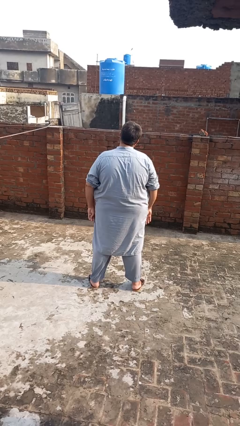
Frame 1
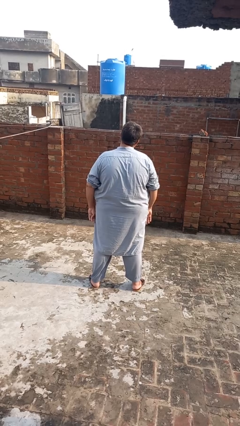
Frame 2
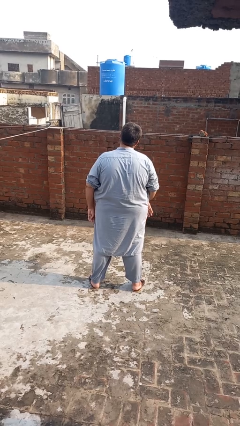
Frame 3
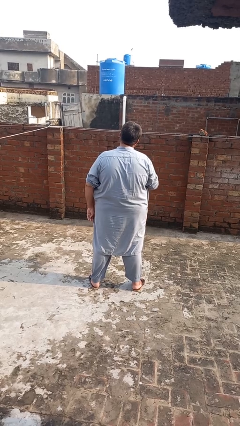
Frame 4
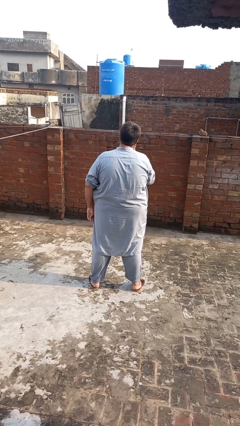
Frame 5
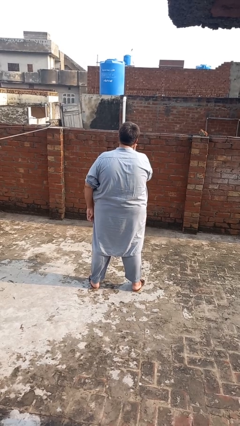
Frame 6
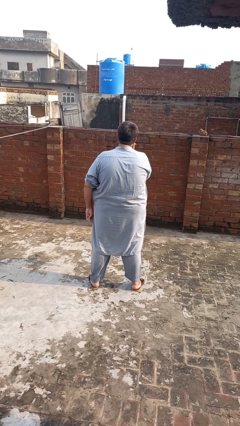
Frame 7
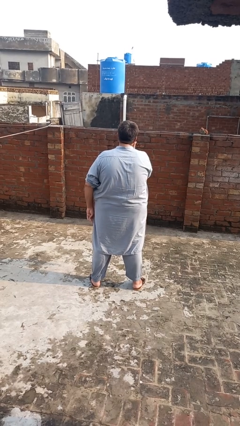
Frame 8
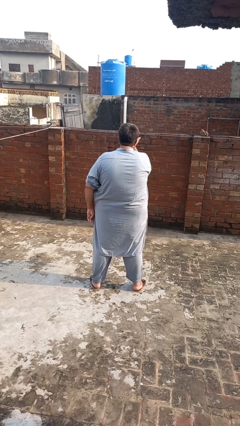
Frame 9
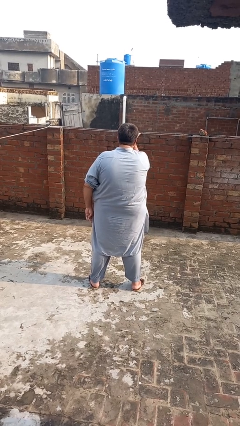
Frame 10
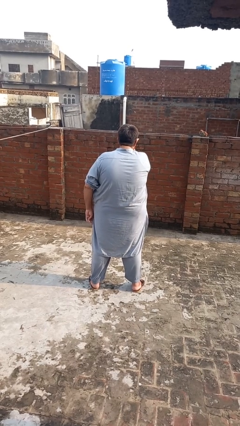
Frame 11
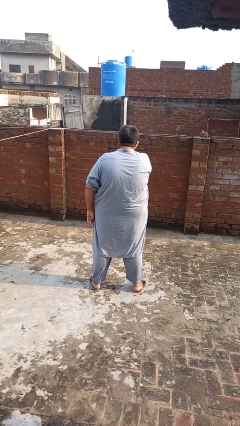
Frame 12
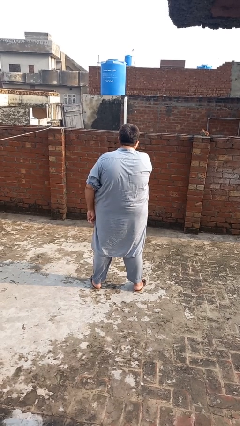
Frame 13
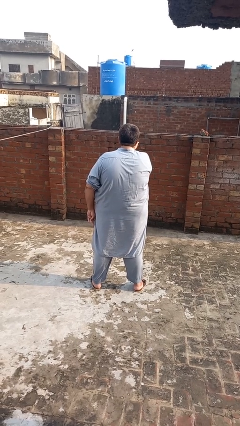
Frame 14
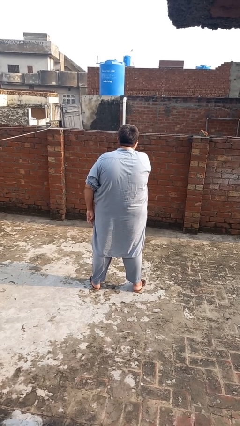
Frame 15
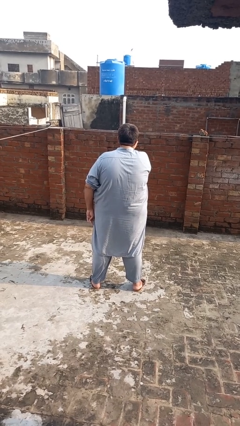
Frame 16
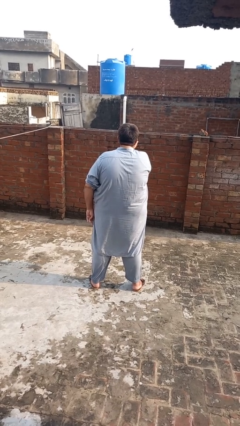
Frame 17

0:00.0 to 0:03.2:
person gestures blow kiss

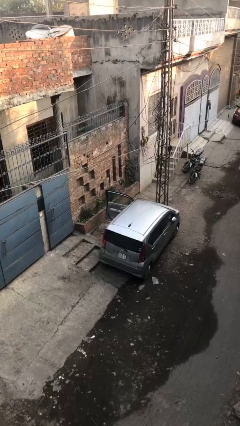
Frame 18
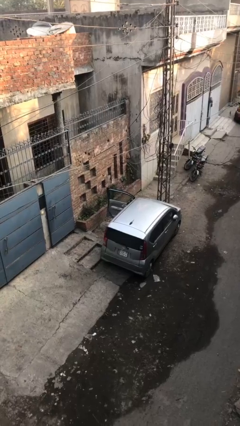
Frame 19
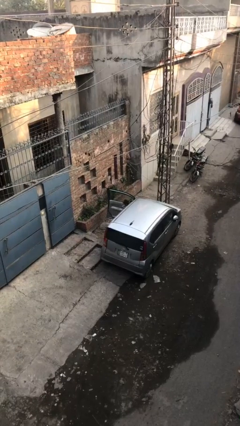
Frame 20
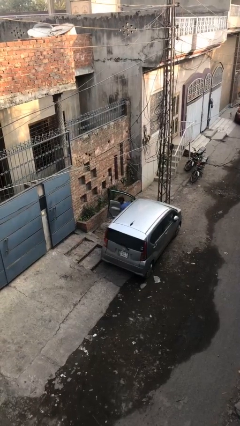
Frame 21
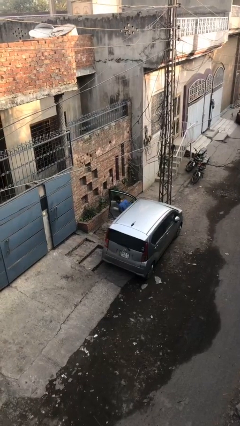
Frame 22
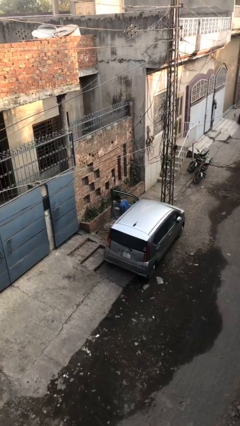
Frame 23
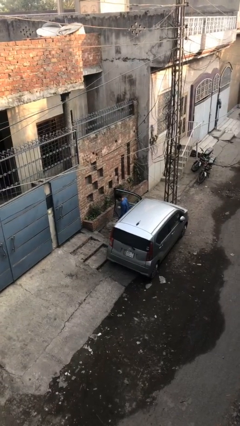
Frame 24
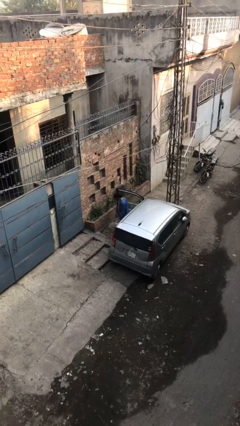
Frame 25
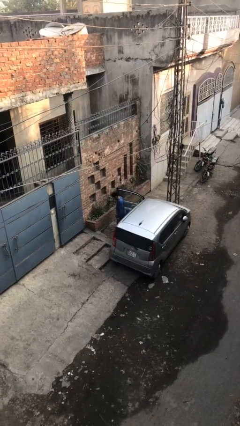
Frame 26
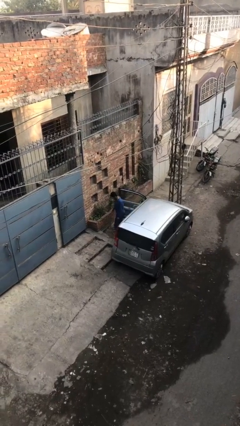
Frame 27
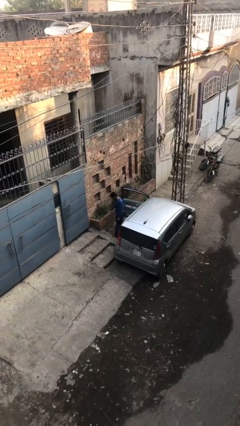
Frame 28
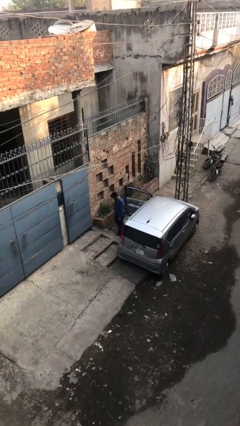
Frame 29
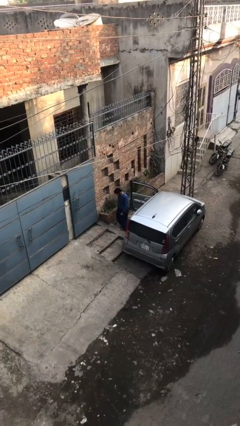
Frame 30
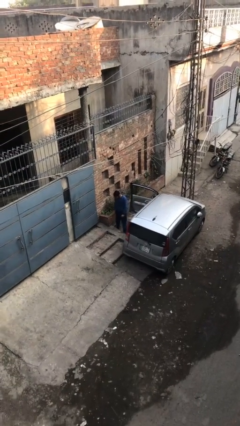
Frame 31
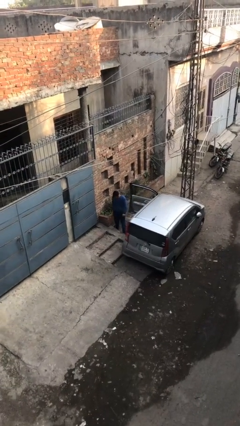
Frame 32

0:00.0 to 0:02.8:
person exits car

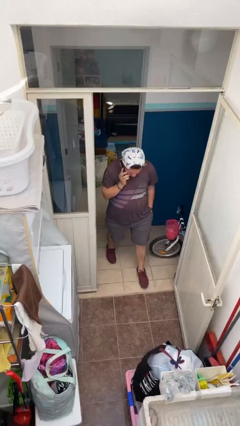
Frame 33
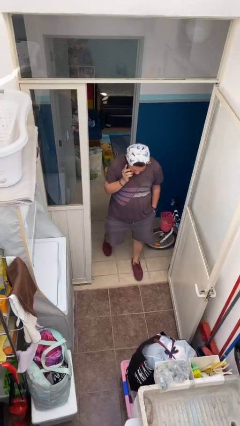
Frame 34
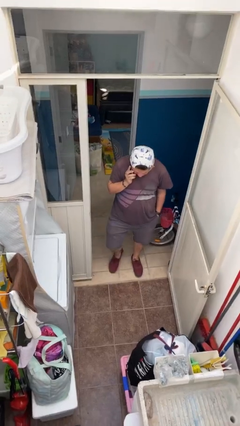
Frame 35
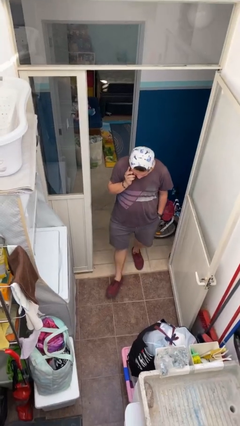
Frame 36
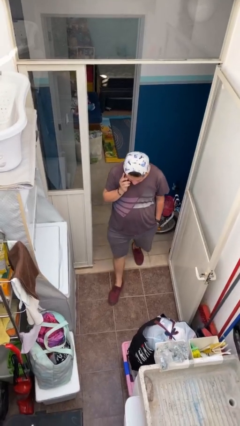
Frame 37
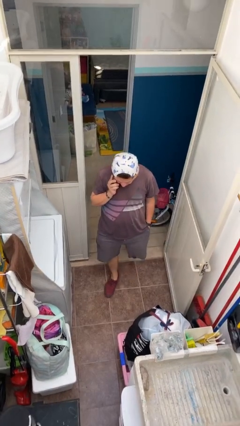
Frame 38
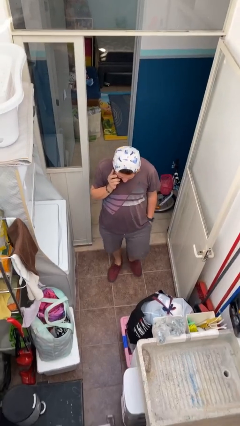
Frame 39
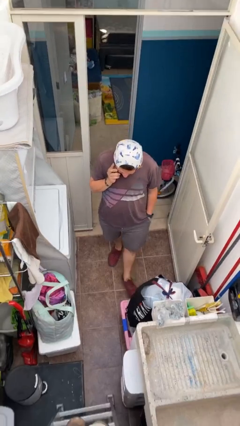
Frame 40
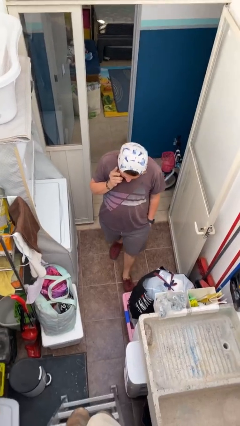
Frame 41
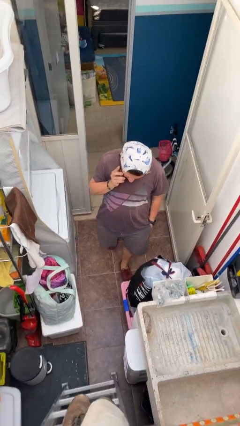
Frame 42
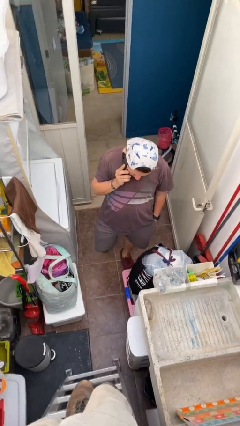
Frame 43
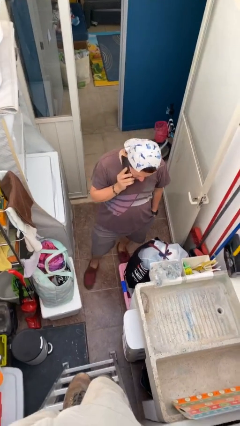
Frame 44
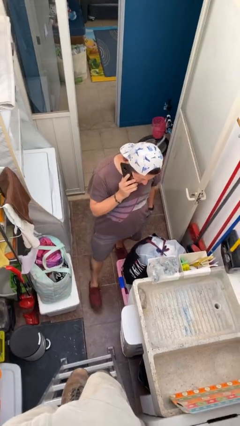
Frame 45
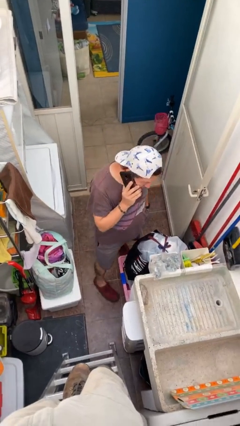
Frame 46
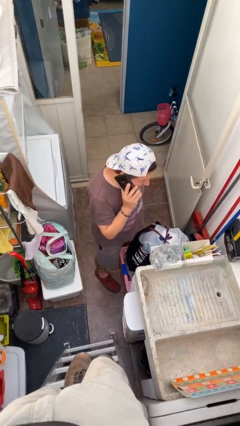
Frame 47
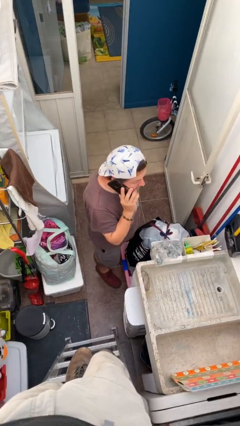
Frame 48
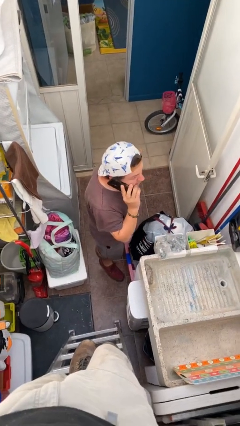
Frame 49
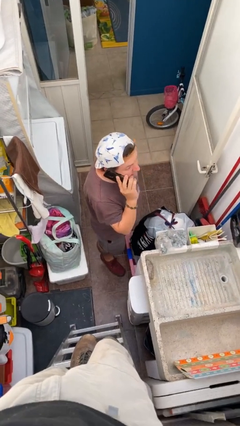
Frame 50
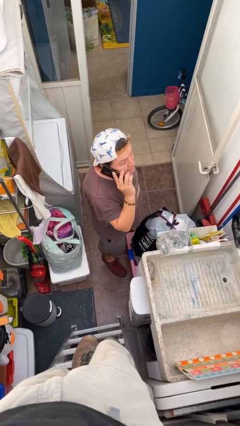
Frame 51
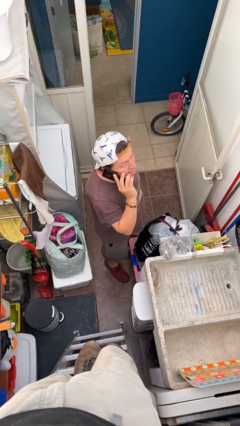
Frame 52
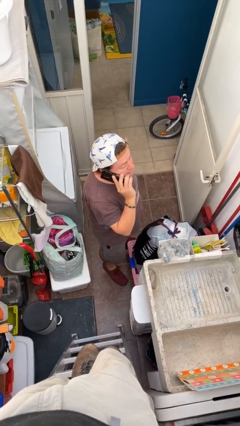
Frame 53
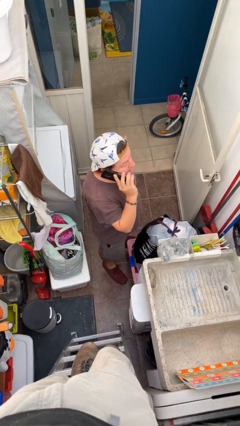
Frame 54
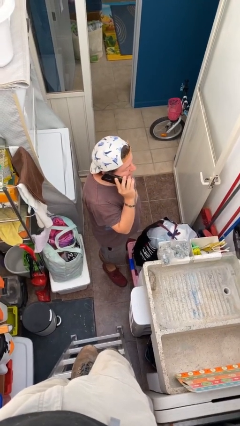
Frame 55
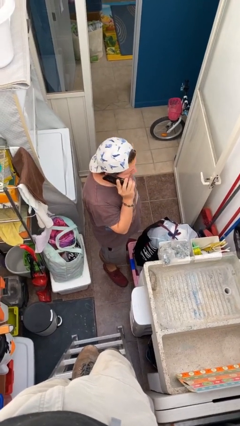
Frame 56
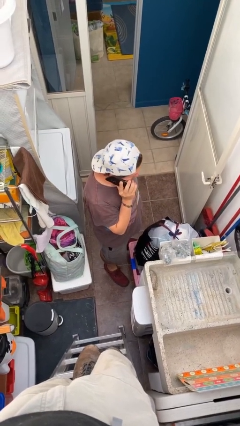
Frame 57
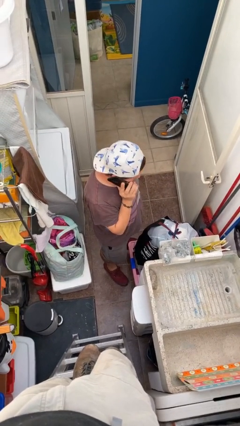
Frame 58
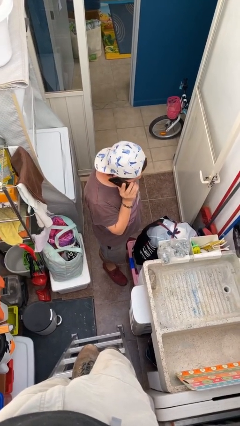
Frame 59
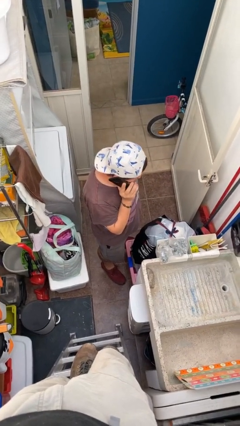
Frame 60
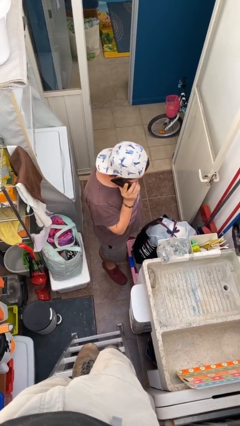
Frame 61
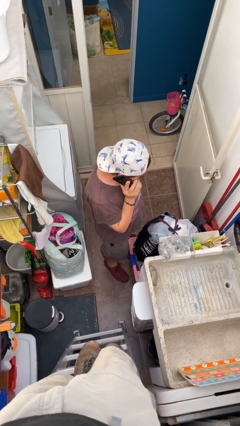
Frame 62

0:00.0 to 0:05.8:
person enters scene through structure

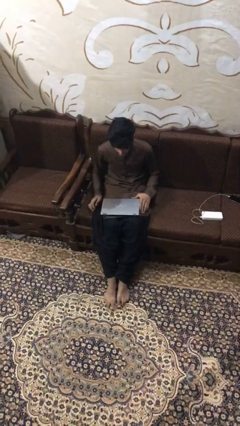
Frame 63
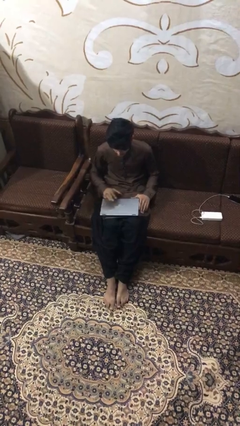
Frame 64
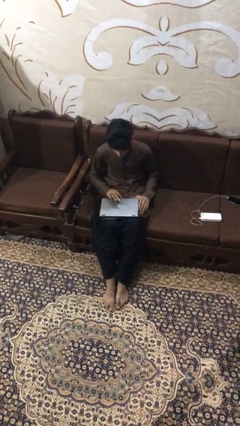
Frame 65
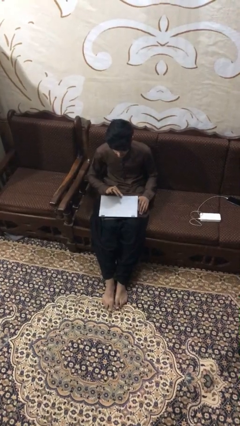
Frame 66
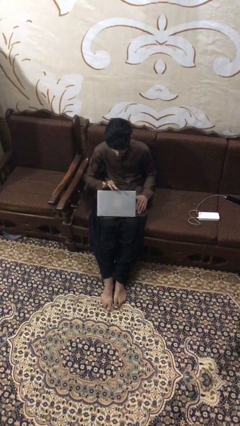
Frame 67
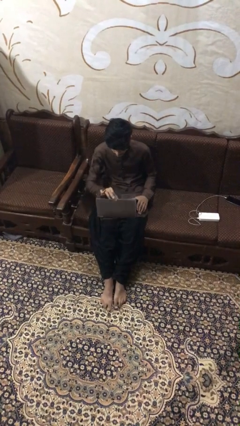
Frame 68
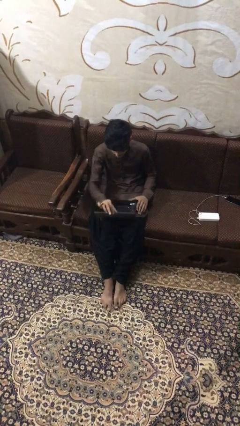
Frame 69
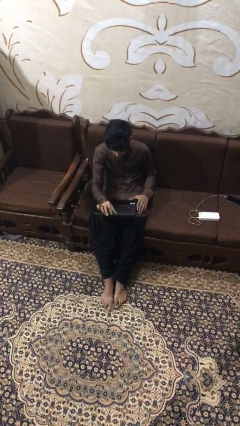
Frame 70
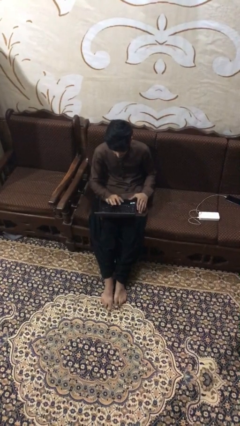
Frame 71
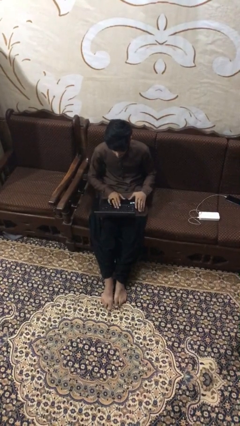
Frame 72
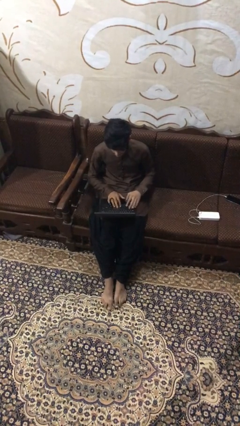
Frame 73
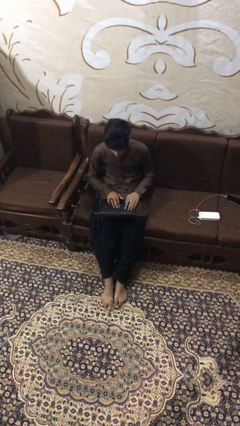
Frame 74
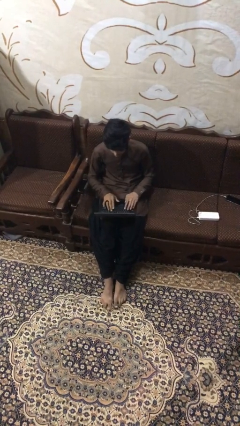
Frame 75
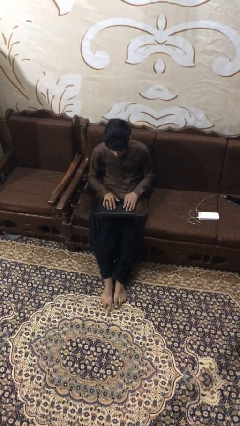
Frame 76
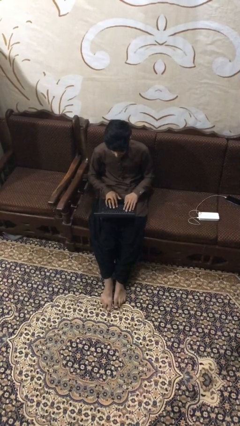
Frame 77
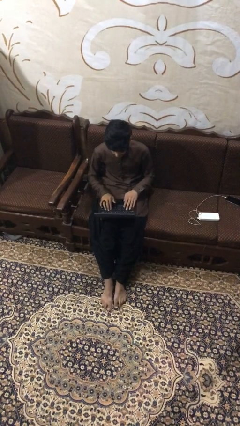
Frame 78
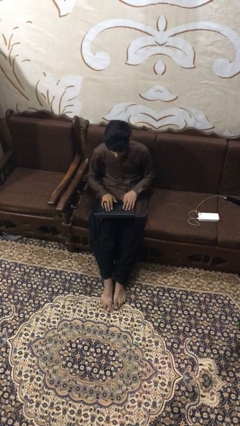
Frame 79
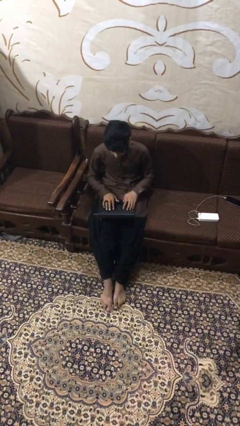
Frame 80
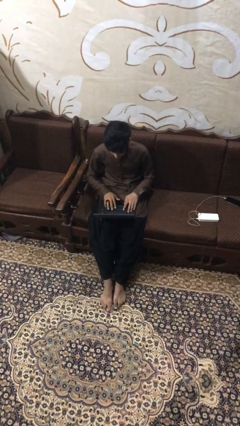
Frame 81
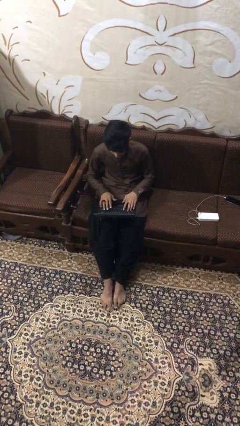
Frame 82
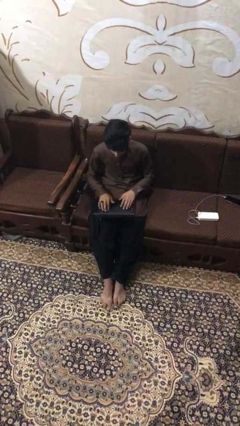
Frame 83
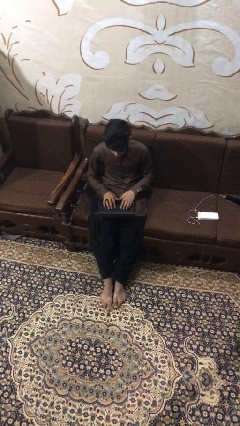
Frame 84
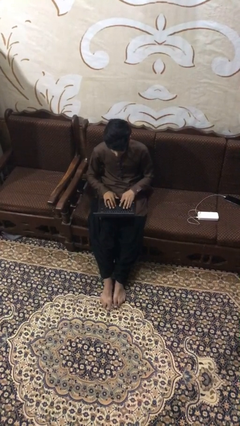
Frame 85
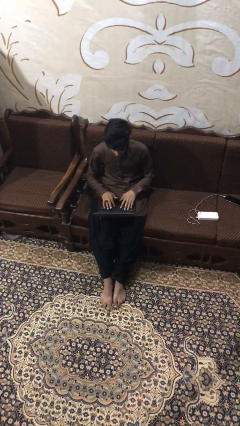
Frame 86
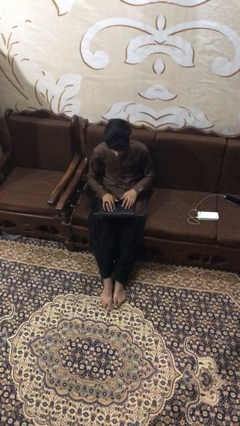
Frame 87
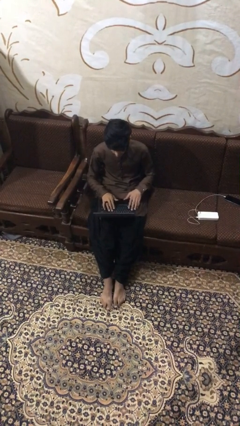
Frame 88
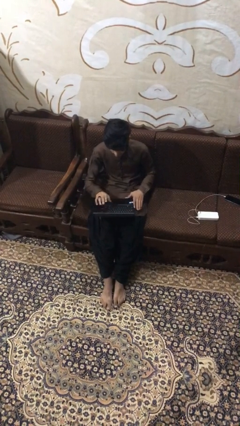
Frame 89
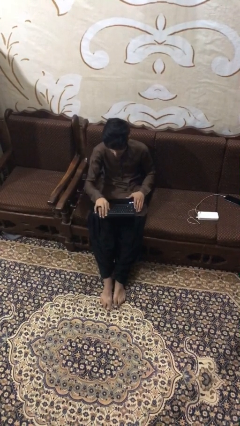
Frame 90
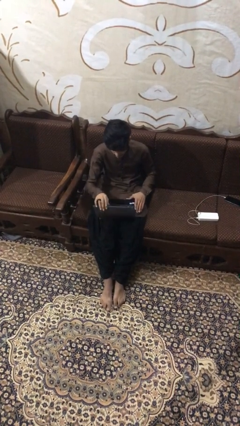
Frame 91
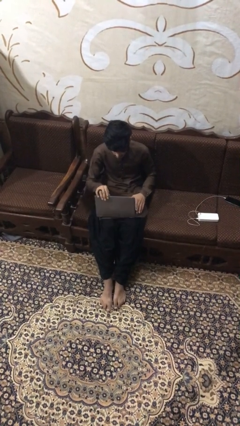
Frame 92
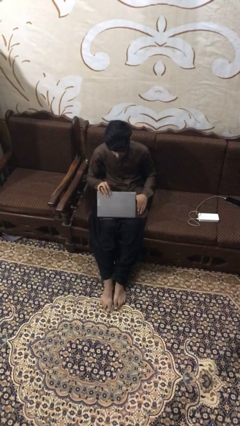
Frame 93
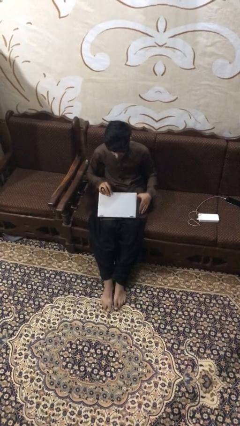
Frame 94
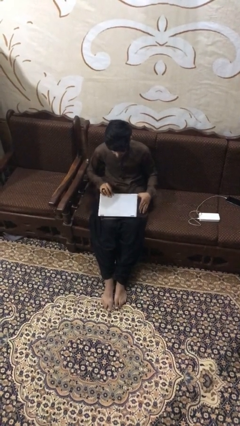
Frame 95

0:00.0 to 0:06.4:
person interacts with laptop
